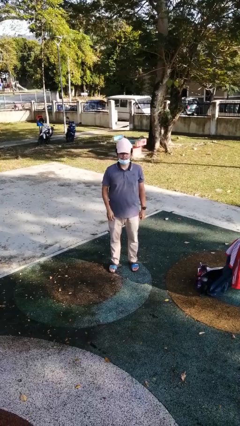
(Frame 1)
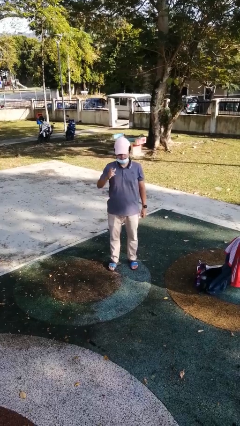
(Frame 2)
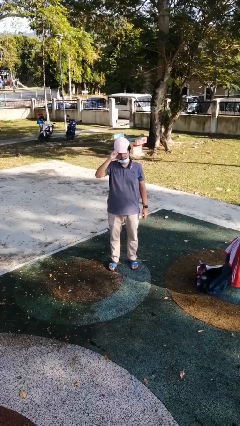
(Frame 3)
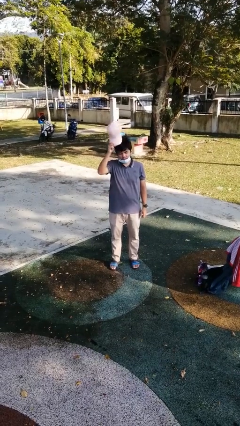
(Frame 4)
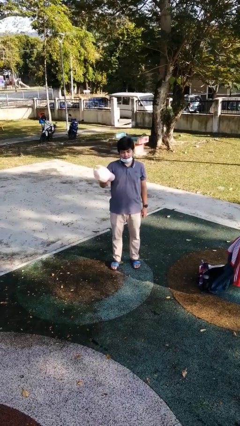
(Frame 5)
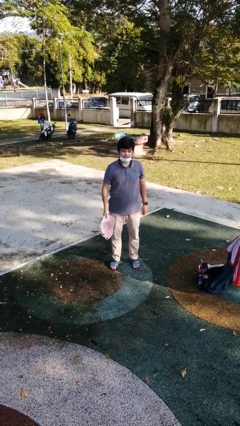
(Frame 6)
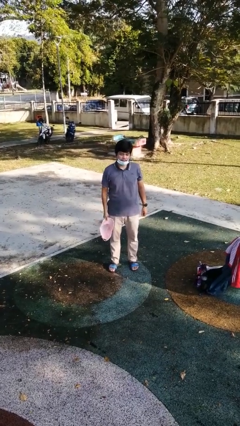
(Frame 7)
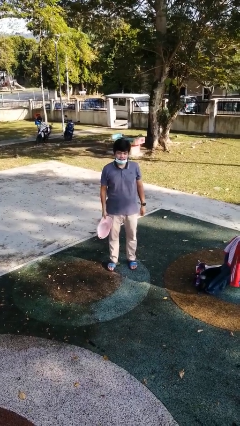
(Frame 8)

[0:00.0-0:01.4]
person takes off hat

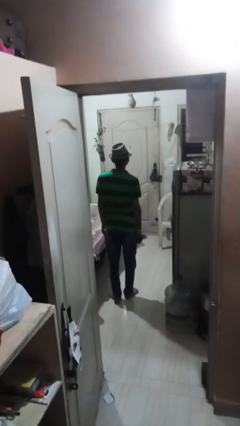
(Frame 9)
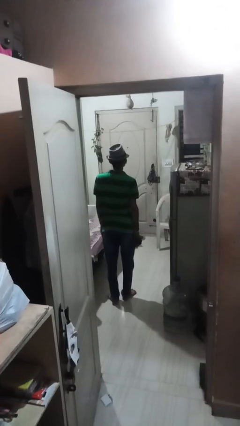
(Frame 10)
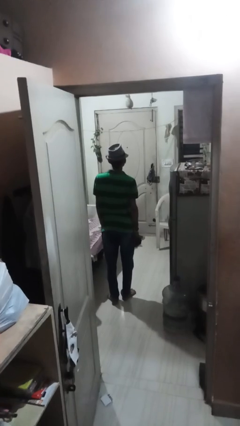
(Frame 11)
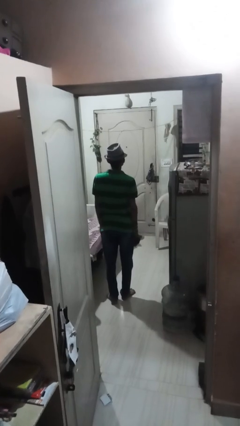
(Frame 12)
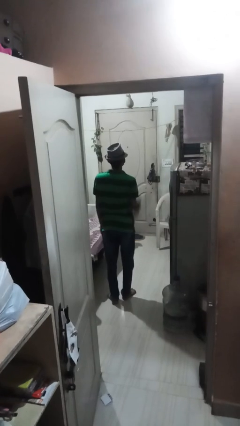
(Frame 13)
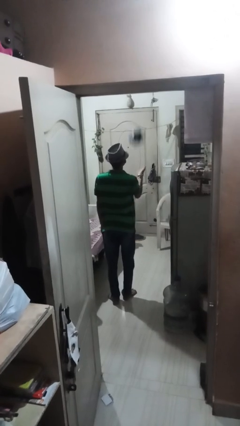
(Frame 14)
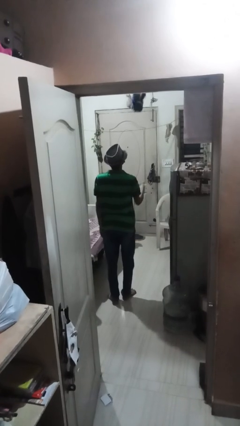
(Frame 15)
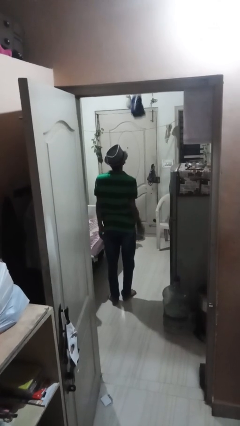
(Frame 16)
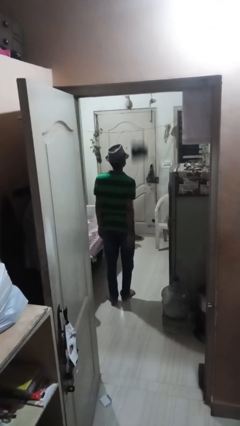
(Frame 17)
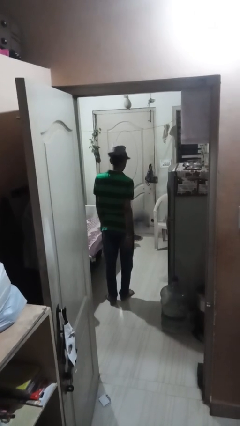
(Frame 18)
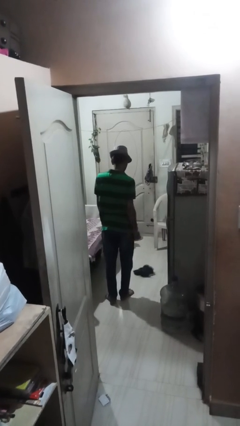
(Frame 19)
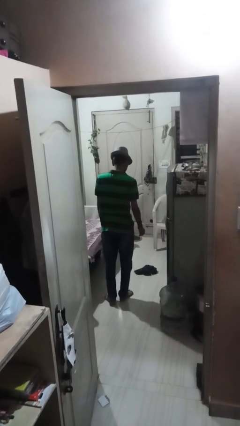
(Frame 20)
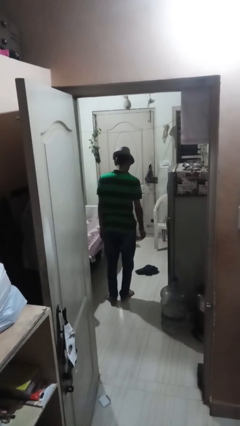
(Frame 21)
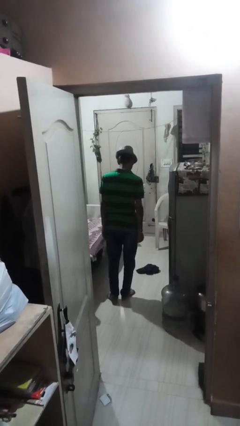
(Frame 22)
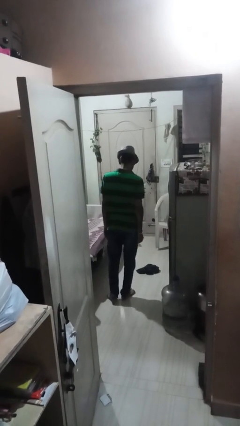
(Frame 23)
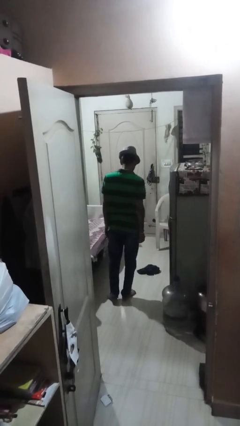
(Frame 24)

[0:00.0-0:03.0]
person throws object into air

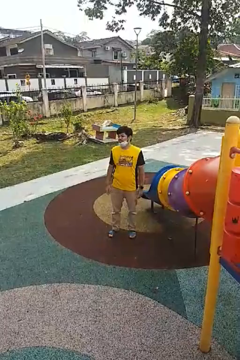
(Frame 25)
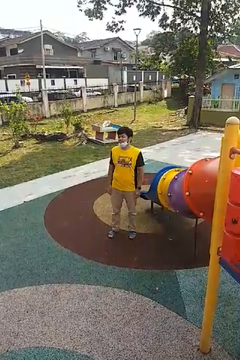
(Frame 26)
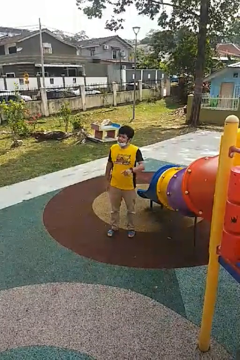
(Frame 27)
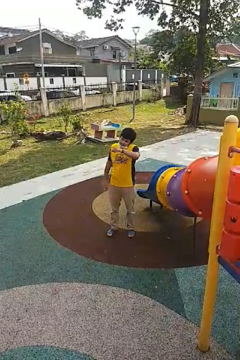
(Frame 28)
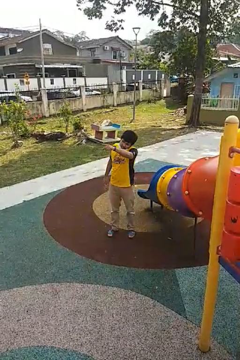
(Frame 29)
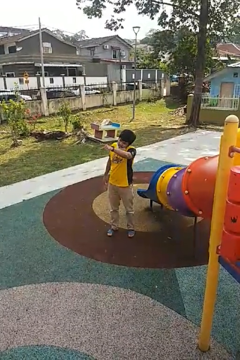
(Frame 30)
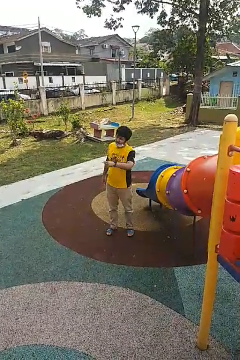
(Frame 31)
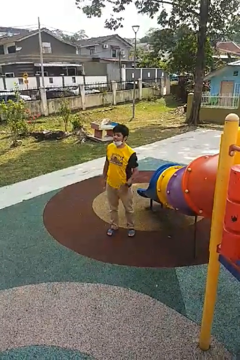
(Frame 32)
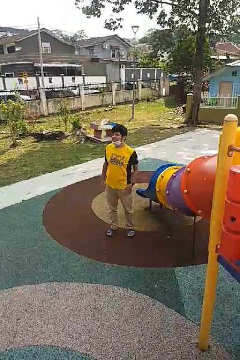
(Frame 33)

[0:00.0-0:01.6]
person points at person

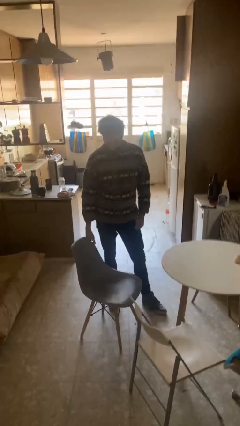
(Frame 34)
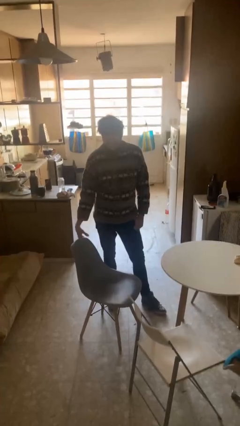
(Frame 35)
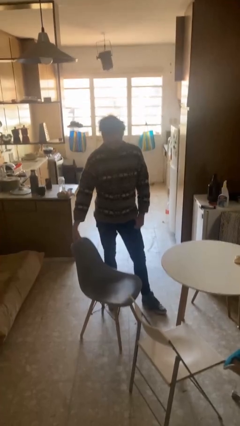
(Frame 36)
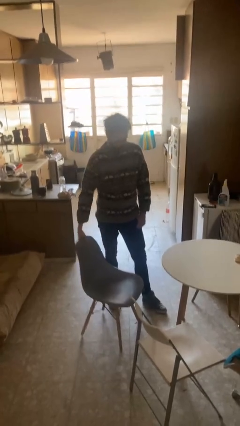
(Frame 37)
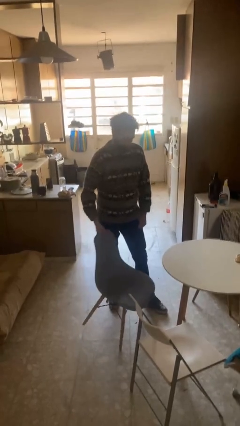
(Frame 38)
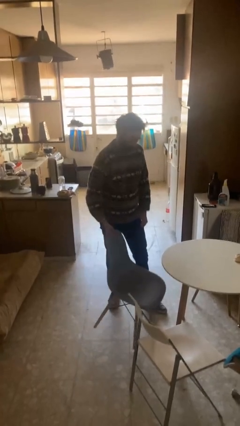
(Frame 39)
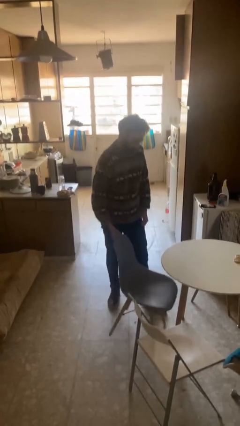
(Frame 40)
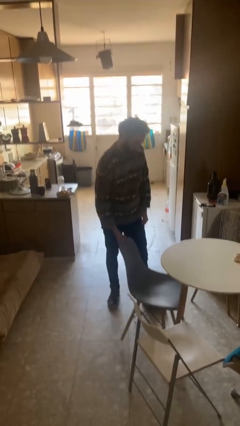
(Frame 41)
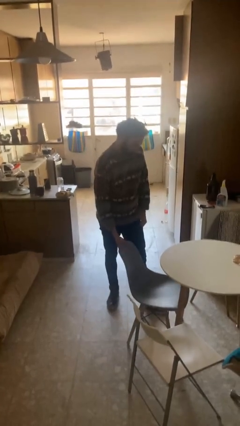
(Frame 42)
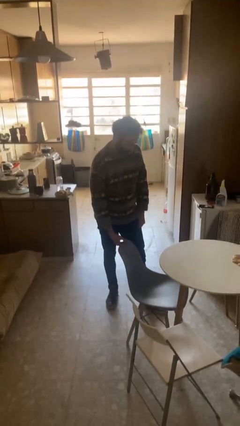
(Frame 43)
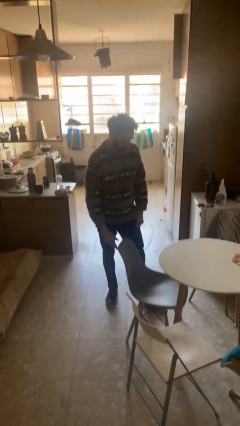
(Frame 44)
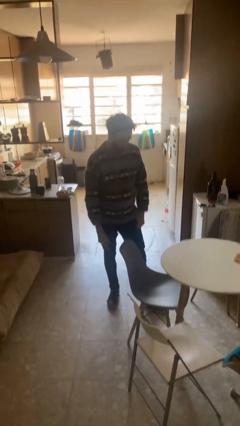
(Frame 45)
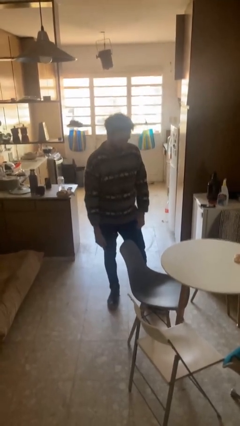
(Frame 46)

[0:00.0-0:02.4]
person pushes in chair

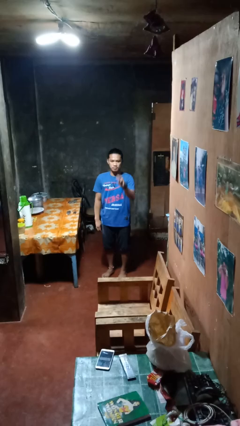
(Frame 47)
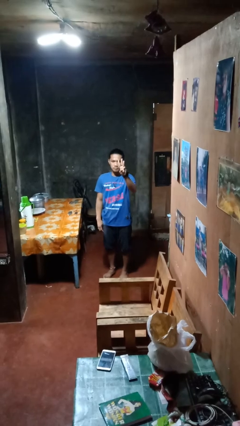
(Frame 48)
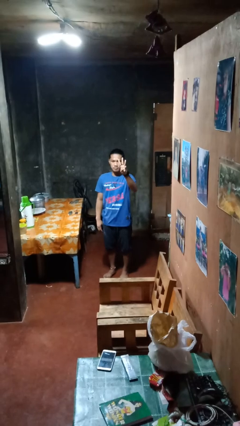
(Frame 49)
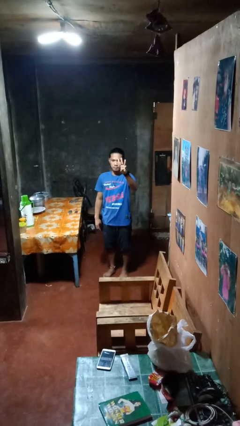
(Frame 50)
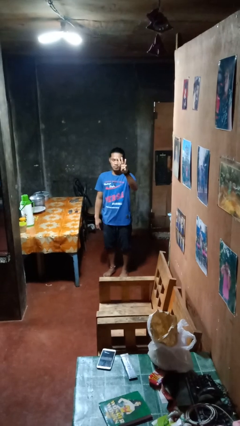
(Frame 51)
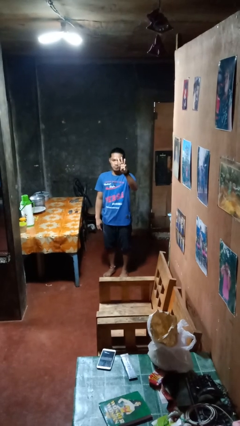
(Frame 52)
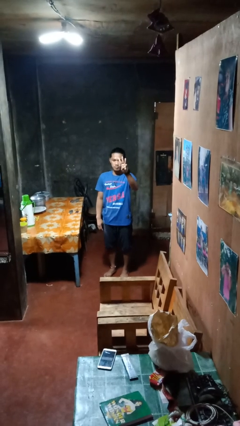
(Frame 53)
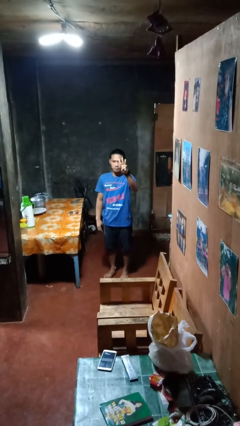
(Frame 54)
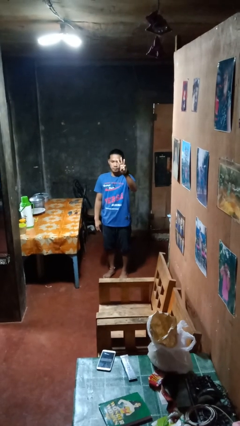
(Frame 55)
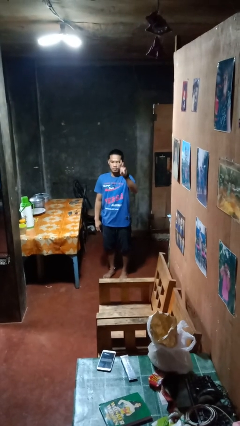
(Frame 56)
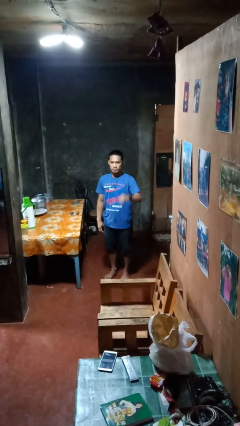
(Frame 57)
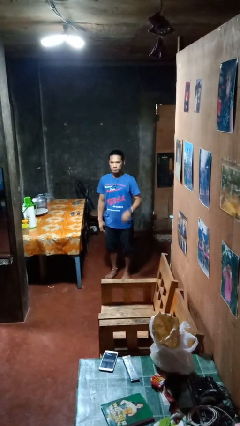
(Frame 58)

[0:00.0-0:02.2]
person gestures number three

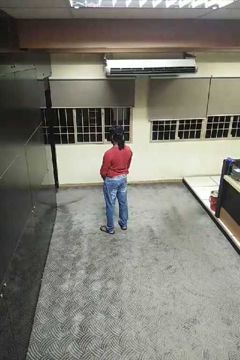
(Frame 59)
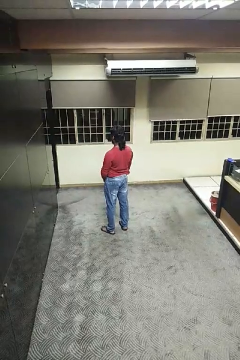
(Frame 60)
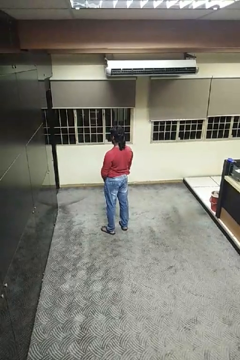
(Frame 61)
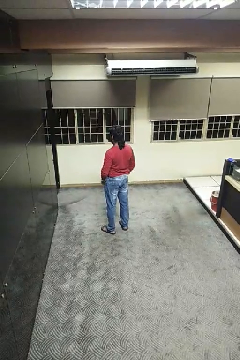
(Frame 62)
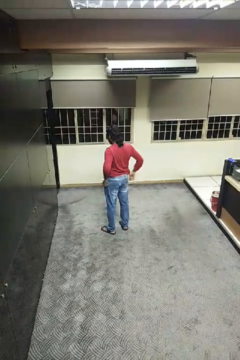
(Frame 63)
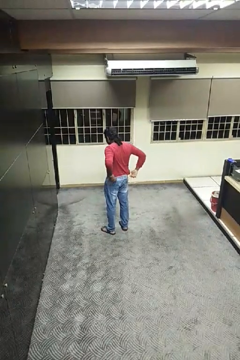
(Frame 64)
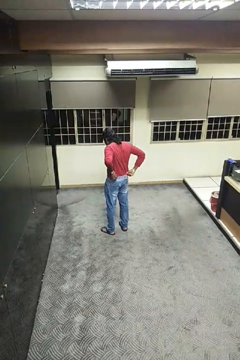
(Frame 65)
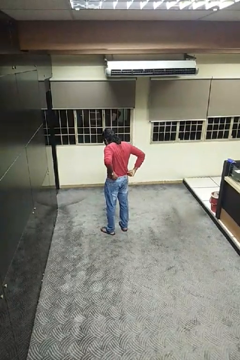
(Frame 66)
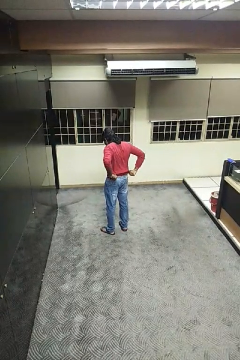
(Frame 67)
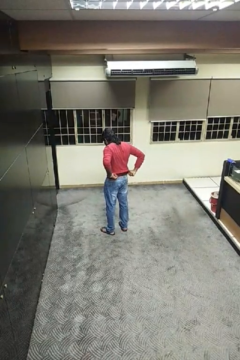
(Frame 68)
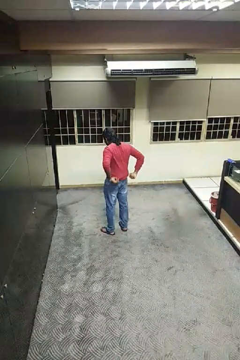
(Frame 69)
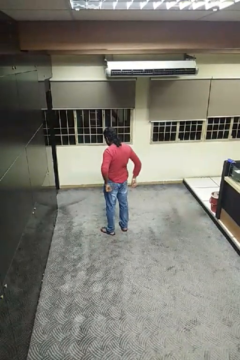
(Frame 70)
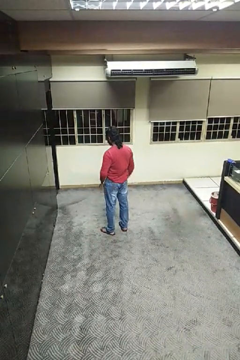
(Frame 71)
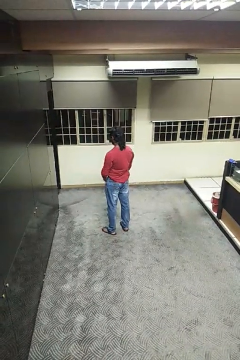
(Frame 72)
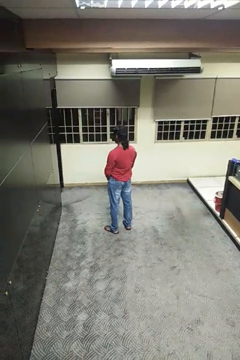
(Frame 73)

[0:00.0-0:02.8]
person untucks shirt

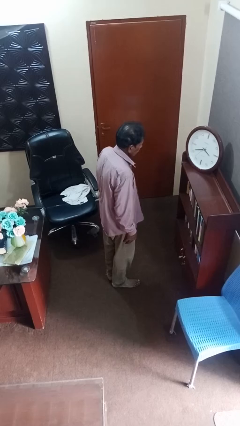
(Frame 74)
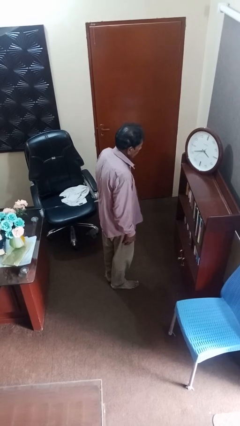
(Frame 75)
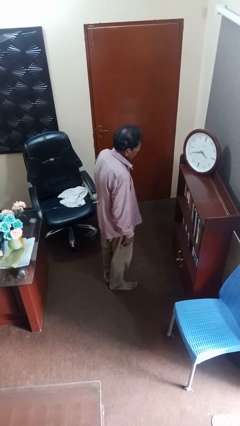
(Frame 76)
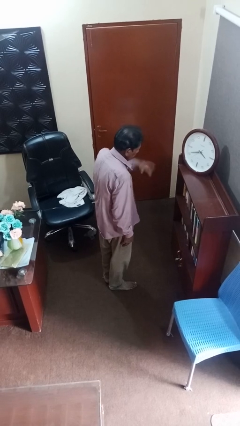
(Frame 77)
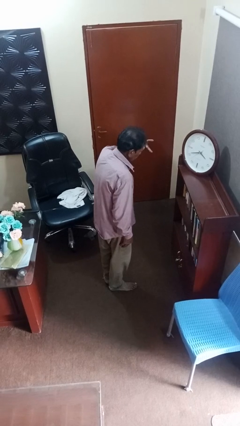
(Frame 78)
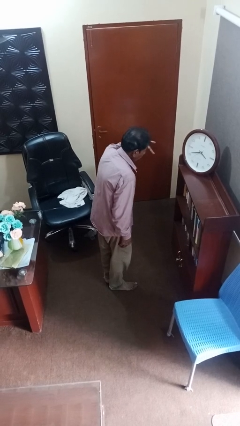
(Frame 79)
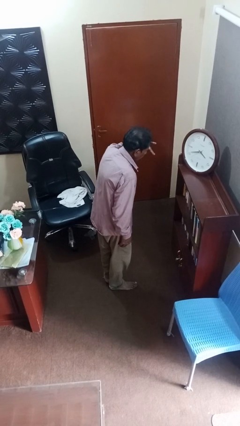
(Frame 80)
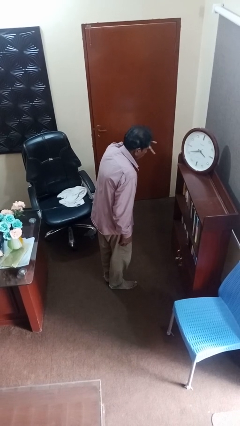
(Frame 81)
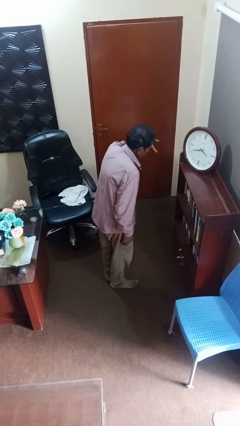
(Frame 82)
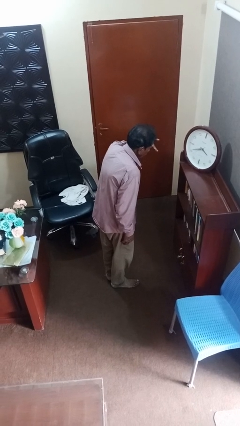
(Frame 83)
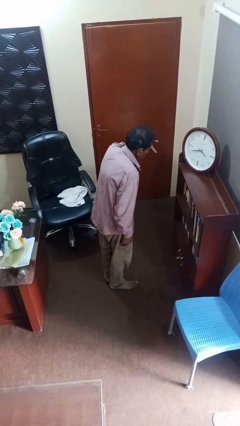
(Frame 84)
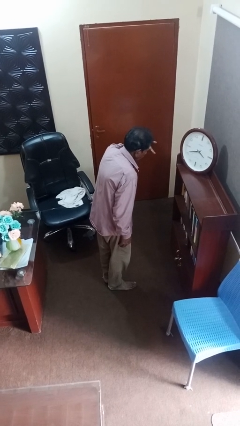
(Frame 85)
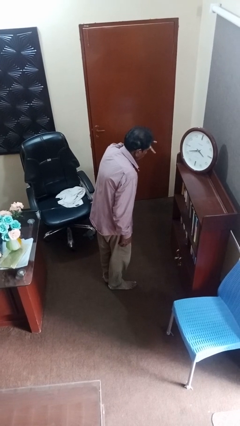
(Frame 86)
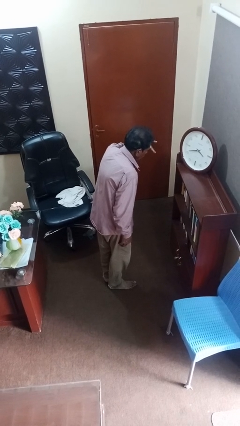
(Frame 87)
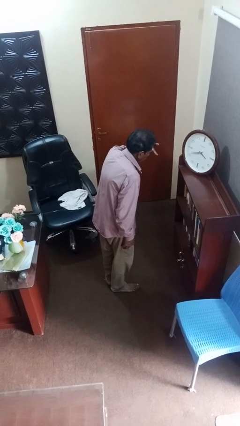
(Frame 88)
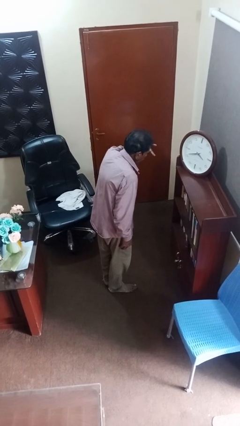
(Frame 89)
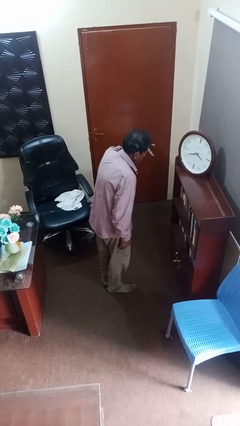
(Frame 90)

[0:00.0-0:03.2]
person gestures watch closely

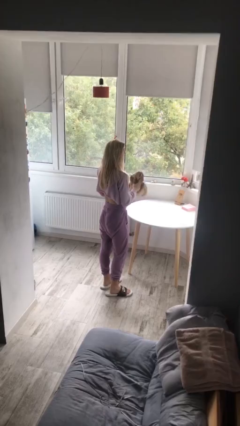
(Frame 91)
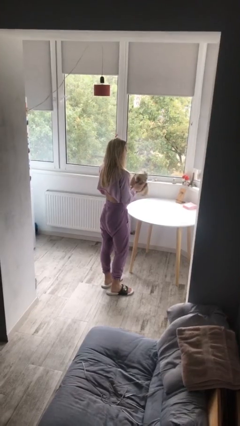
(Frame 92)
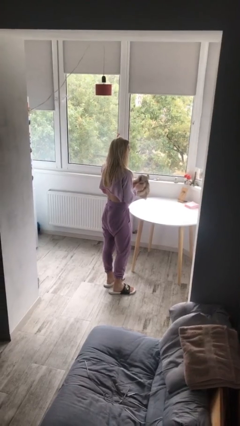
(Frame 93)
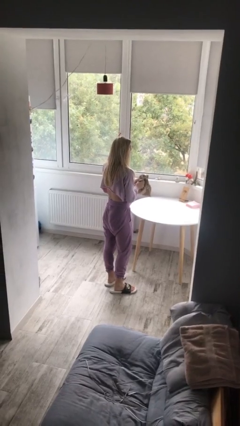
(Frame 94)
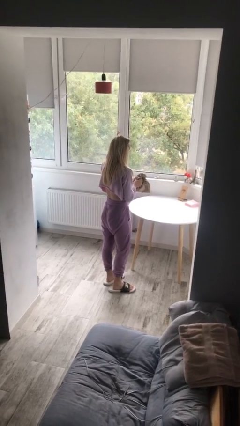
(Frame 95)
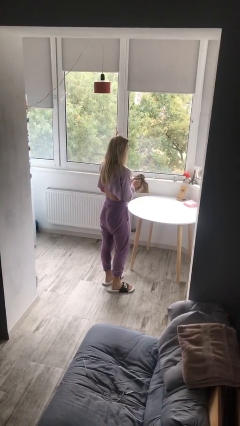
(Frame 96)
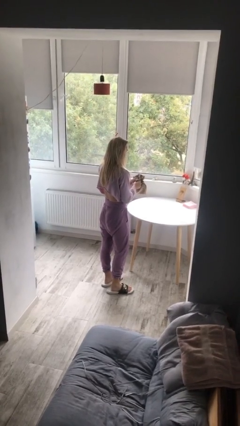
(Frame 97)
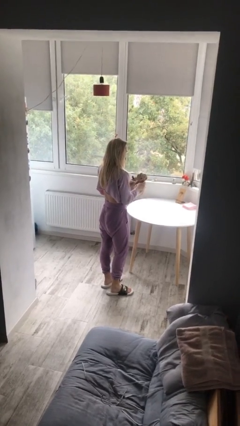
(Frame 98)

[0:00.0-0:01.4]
person crumples paper
